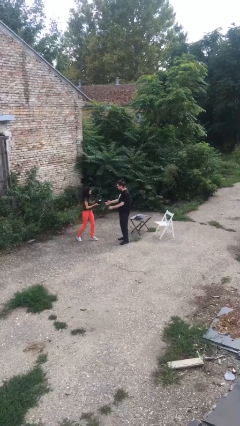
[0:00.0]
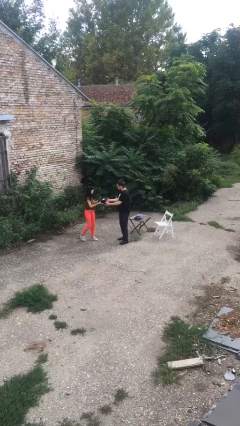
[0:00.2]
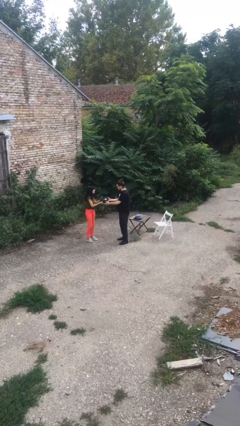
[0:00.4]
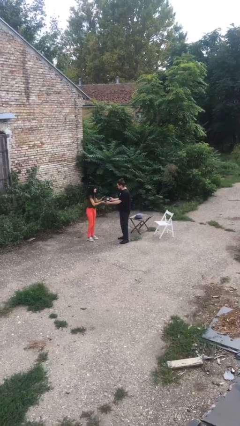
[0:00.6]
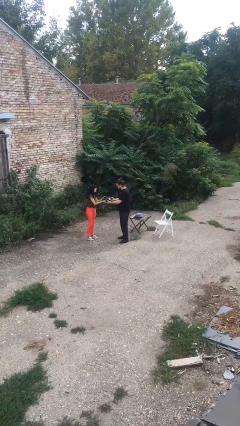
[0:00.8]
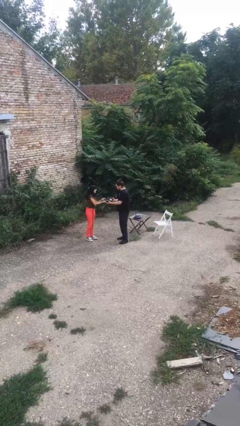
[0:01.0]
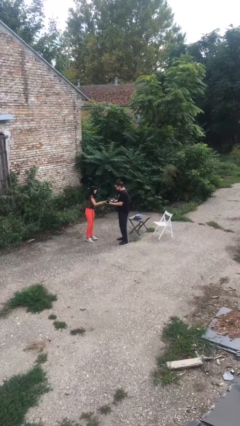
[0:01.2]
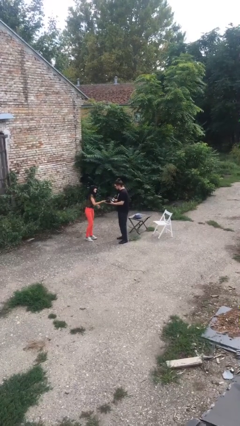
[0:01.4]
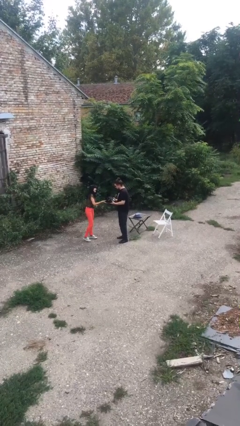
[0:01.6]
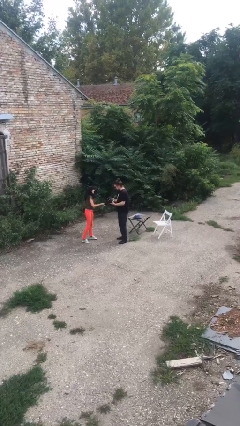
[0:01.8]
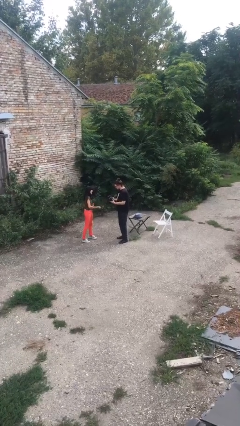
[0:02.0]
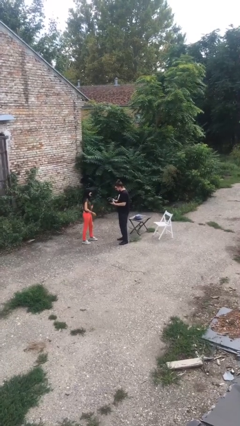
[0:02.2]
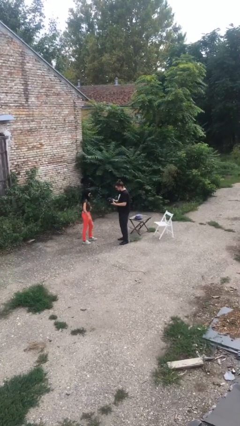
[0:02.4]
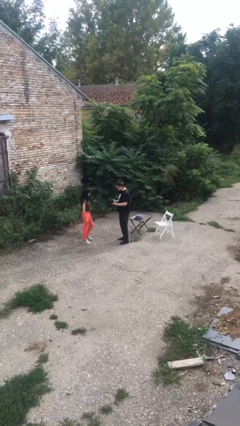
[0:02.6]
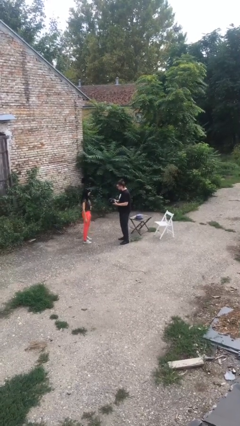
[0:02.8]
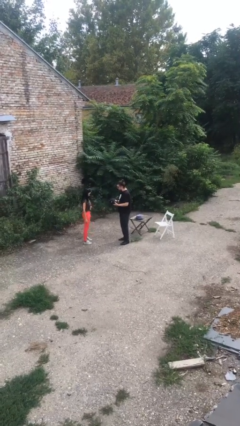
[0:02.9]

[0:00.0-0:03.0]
person transfers object to person

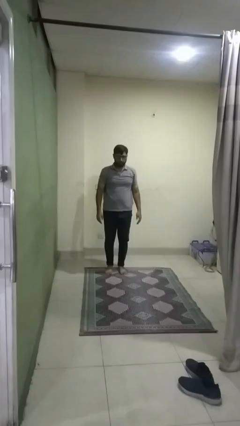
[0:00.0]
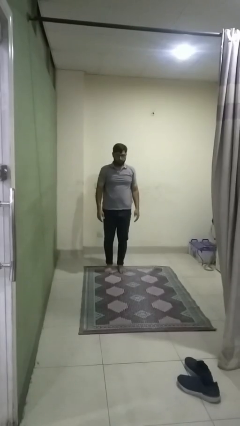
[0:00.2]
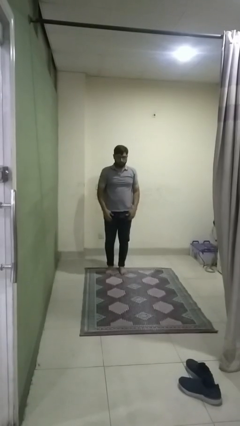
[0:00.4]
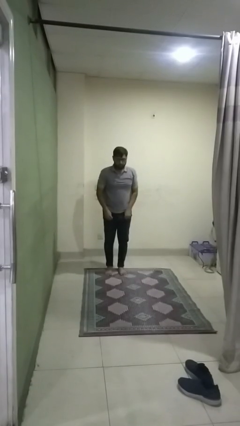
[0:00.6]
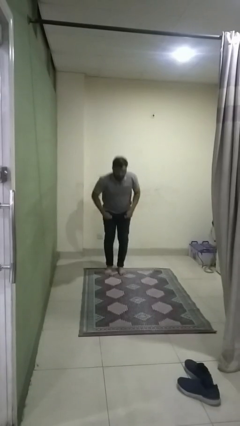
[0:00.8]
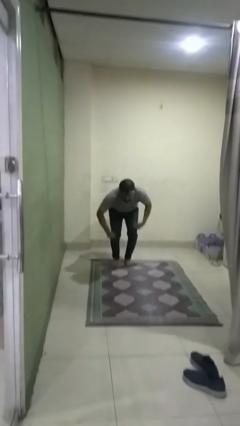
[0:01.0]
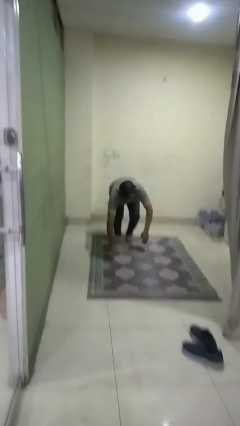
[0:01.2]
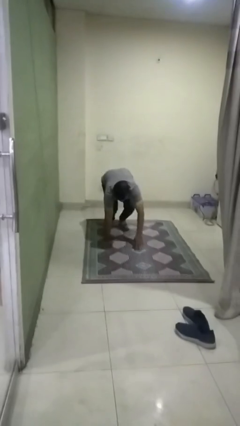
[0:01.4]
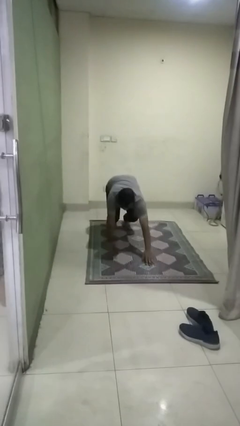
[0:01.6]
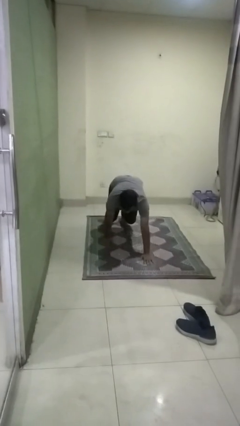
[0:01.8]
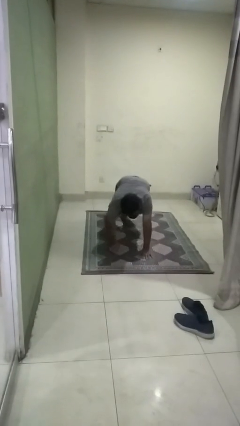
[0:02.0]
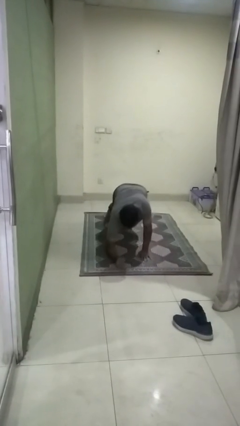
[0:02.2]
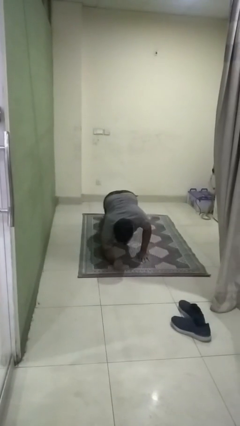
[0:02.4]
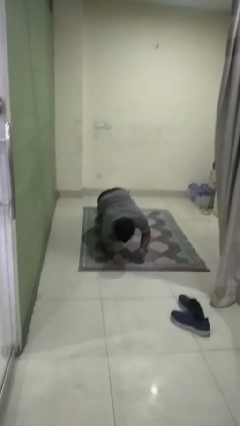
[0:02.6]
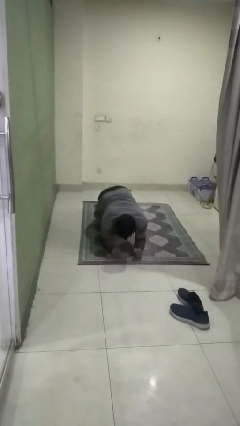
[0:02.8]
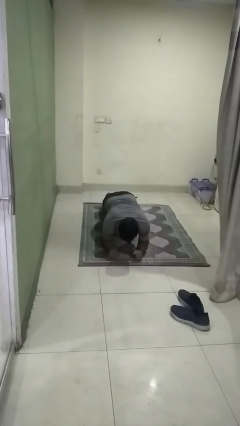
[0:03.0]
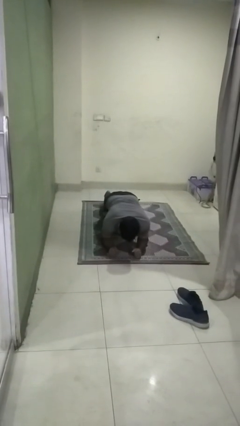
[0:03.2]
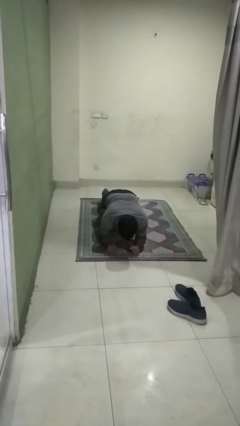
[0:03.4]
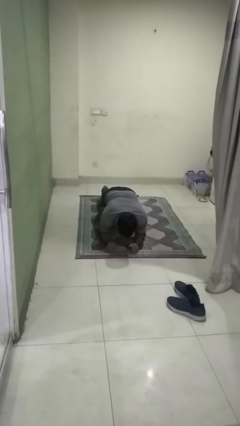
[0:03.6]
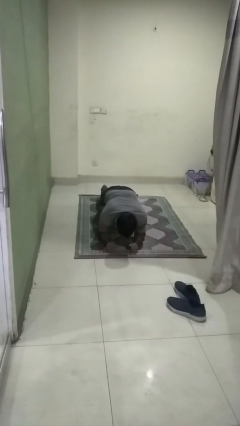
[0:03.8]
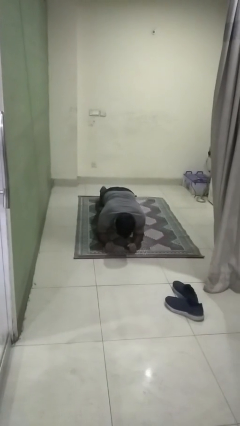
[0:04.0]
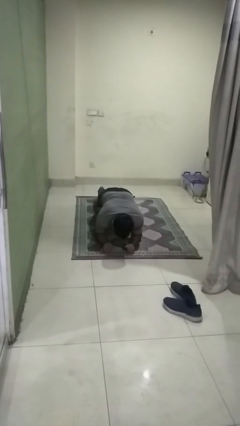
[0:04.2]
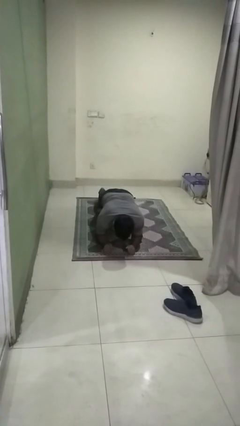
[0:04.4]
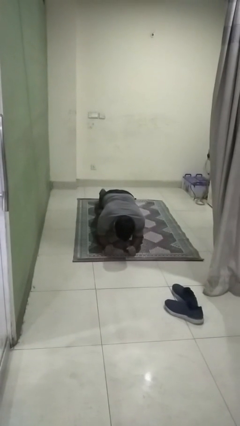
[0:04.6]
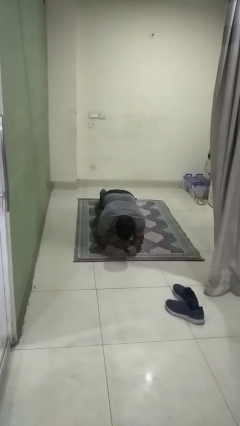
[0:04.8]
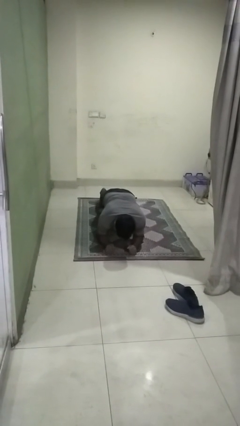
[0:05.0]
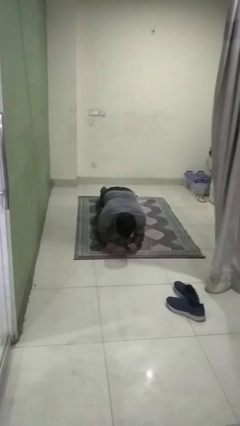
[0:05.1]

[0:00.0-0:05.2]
person exercises with plank

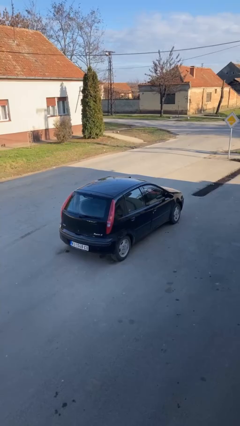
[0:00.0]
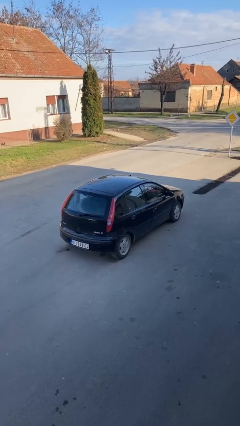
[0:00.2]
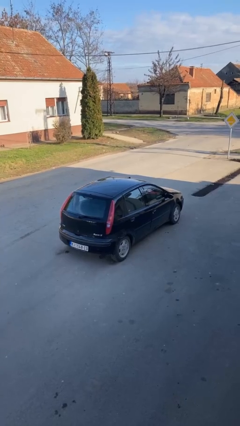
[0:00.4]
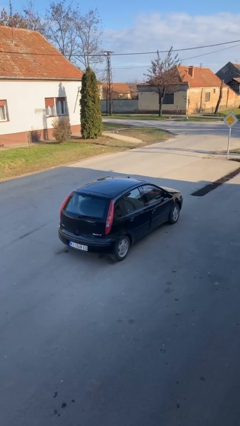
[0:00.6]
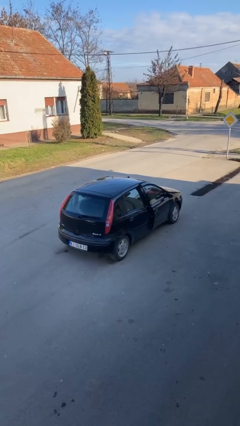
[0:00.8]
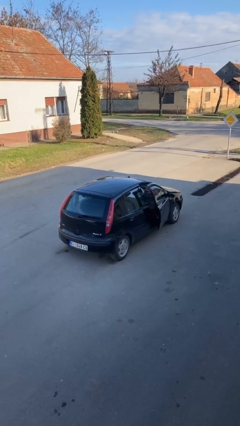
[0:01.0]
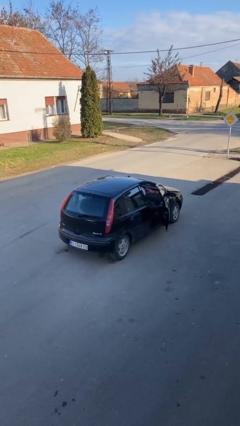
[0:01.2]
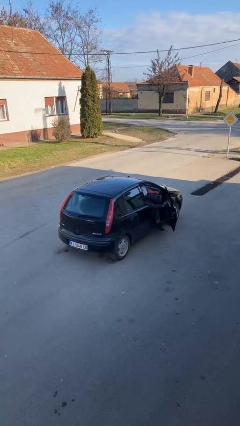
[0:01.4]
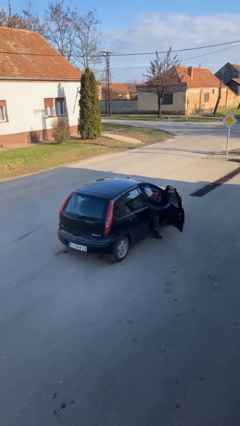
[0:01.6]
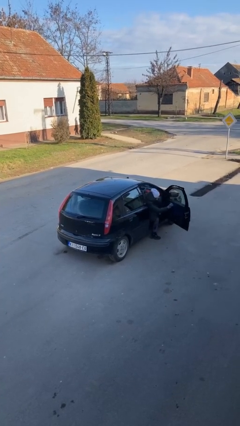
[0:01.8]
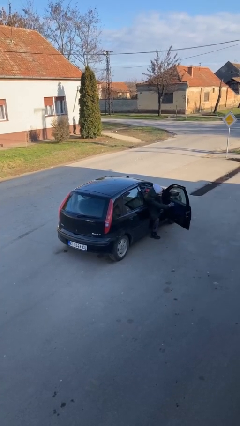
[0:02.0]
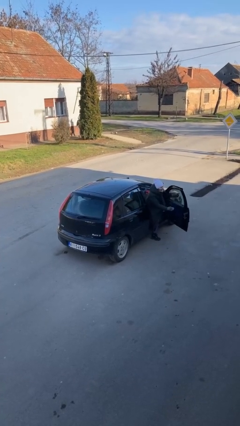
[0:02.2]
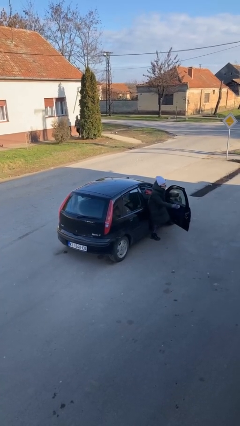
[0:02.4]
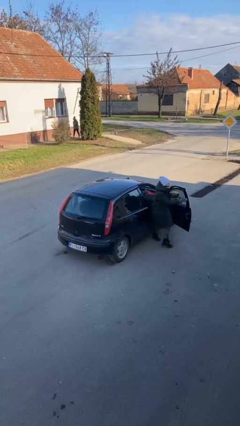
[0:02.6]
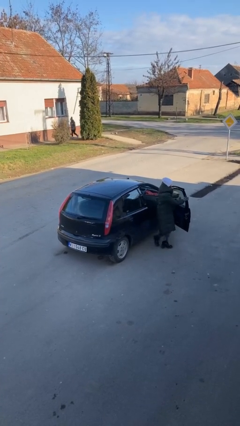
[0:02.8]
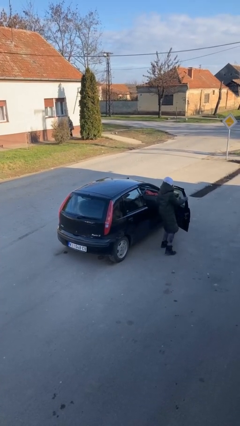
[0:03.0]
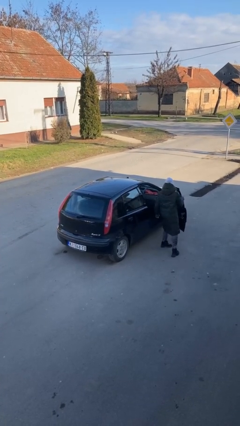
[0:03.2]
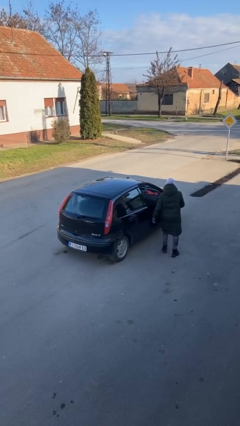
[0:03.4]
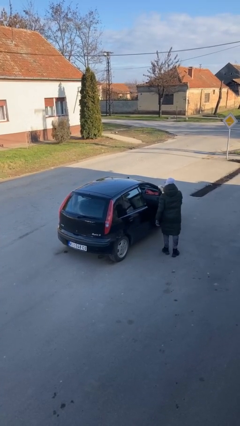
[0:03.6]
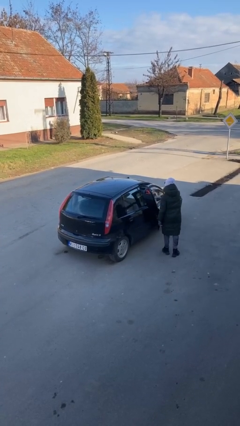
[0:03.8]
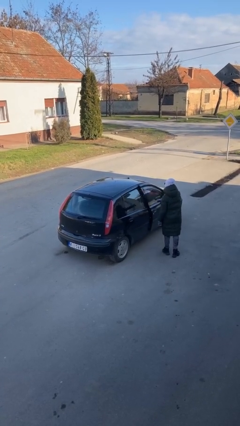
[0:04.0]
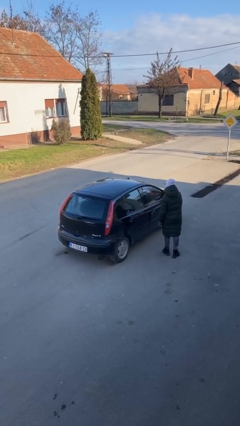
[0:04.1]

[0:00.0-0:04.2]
car drops off person

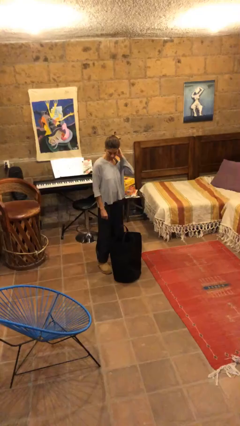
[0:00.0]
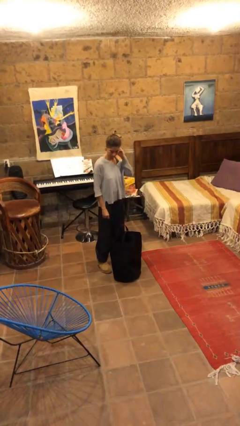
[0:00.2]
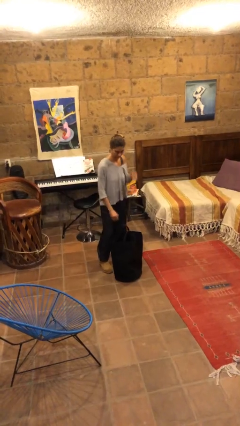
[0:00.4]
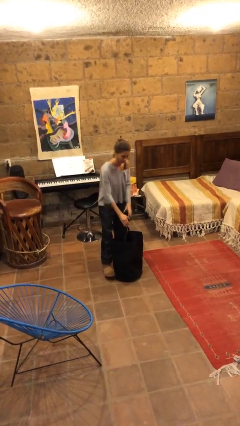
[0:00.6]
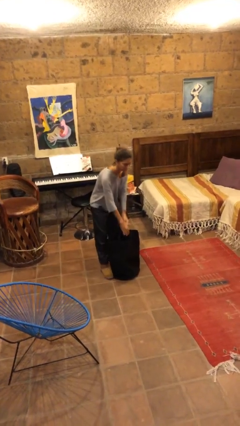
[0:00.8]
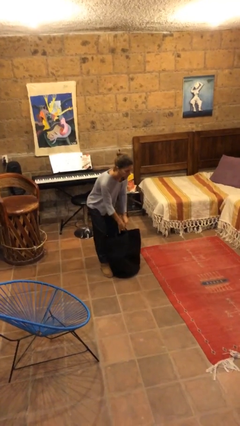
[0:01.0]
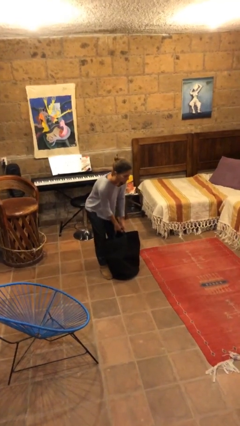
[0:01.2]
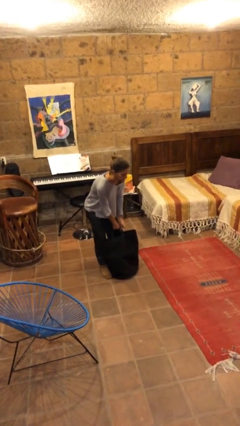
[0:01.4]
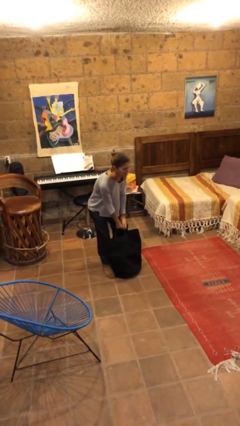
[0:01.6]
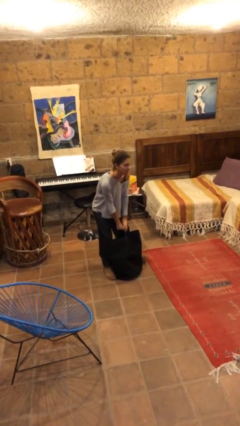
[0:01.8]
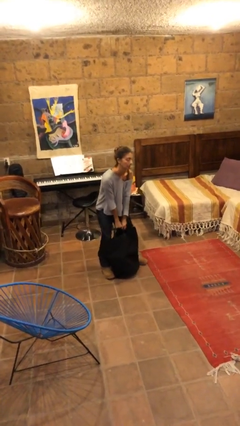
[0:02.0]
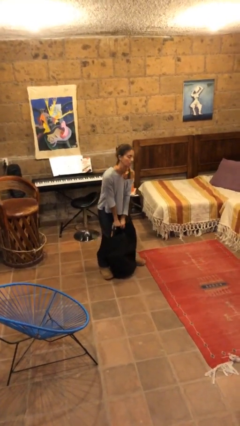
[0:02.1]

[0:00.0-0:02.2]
person picks up object from floor

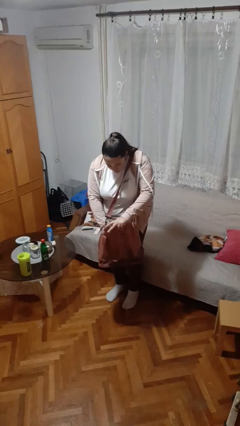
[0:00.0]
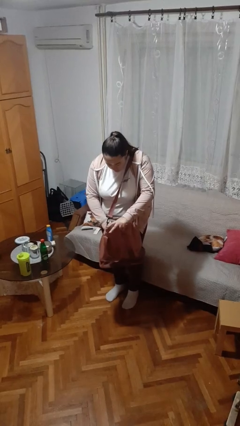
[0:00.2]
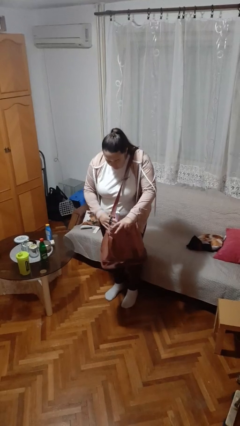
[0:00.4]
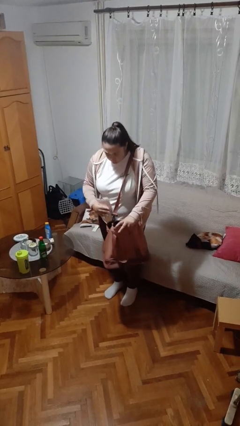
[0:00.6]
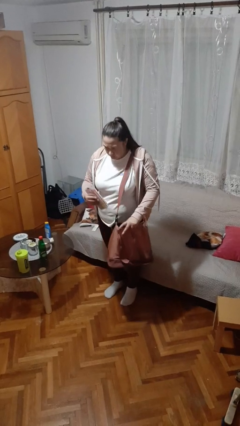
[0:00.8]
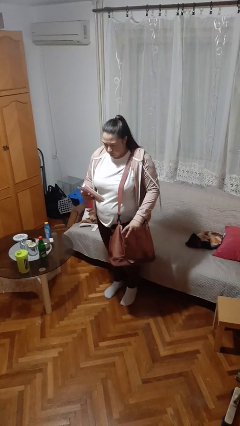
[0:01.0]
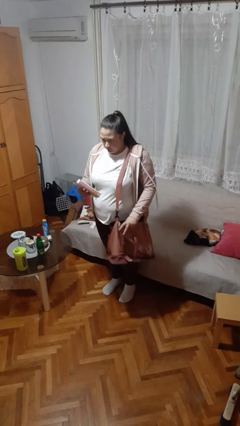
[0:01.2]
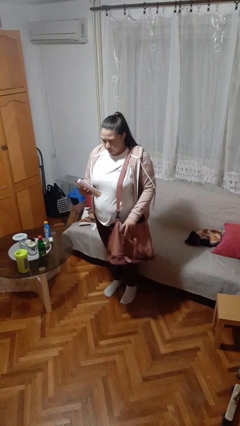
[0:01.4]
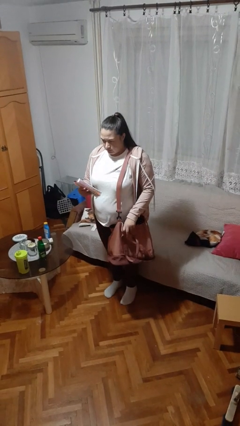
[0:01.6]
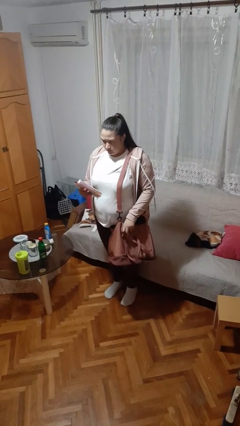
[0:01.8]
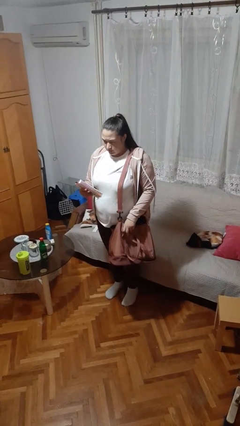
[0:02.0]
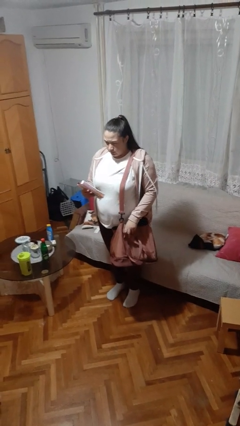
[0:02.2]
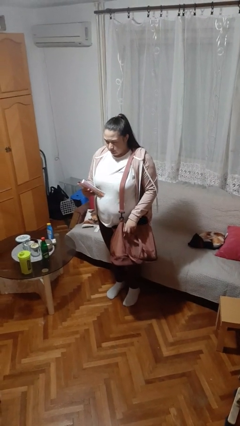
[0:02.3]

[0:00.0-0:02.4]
person takes object from purse

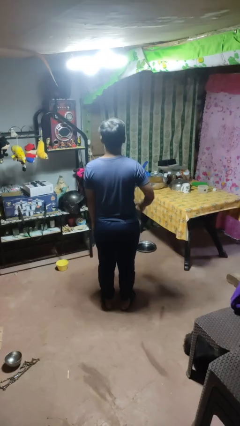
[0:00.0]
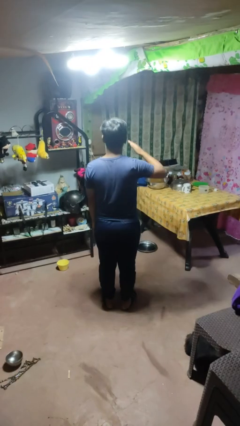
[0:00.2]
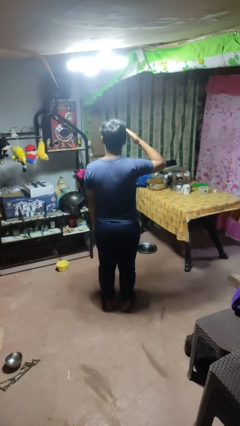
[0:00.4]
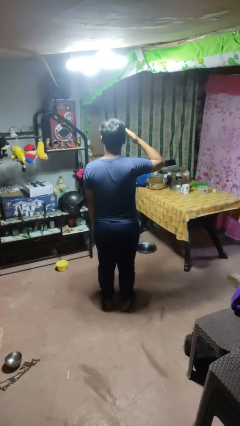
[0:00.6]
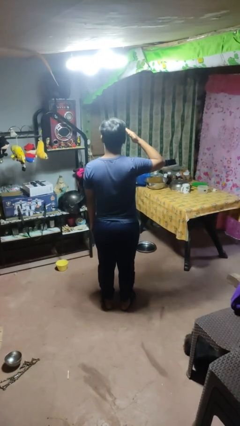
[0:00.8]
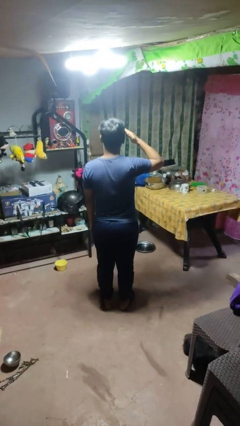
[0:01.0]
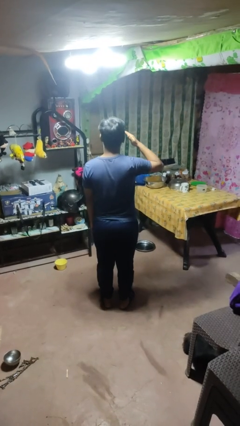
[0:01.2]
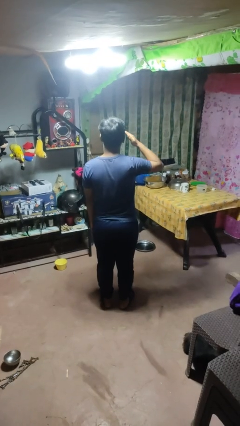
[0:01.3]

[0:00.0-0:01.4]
person salutes
